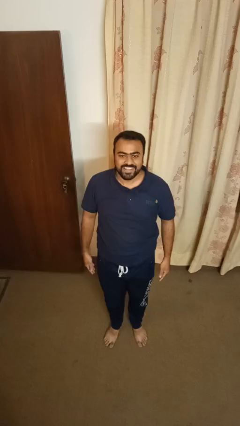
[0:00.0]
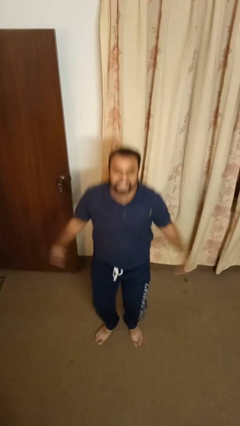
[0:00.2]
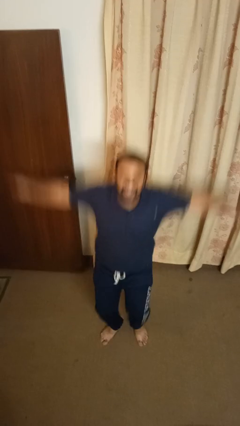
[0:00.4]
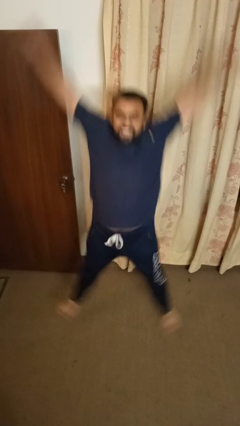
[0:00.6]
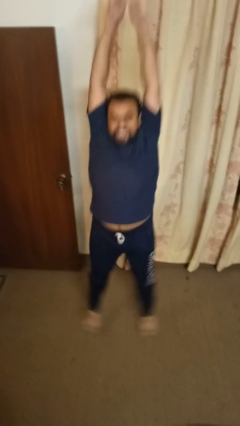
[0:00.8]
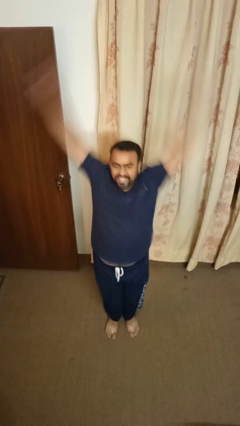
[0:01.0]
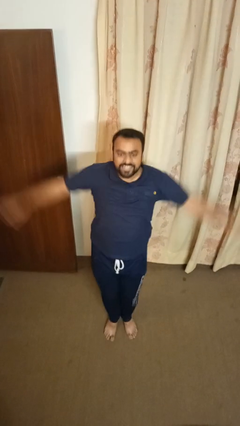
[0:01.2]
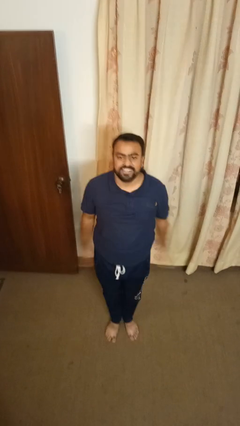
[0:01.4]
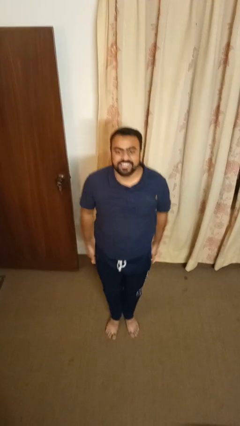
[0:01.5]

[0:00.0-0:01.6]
person exercises with jumping jacks

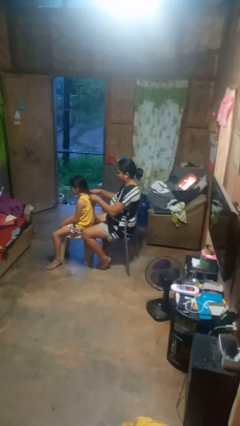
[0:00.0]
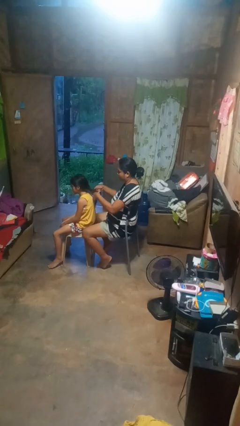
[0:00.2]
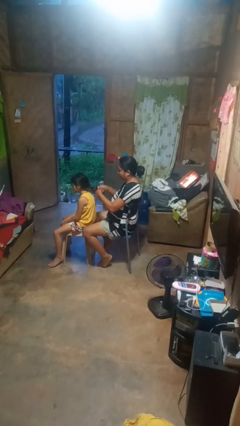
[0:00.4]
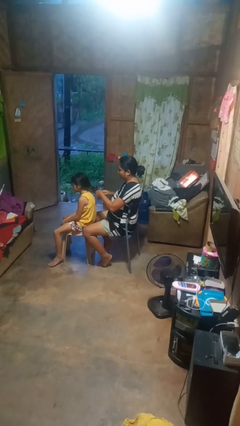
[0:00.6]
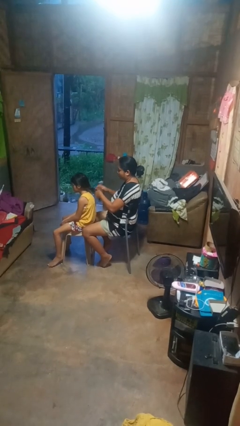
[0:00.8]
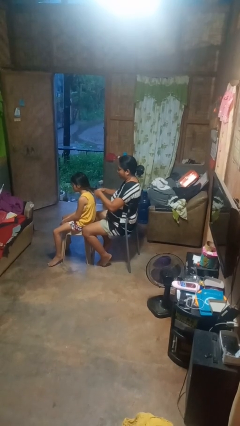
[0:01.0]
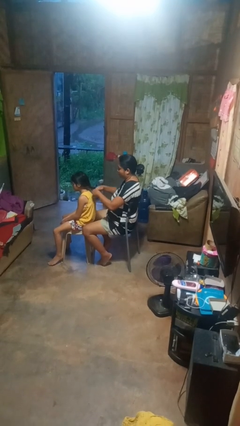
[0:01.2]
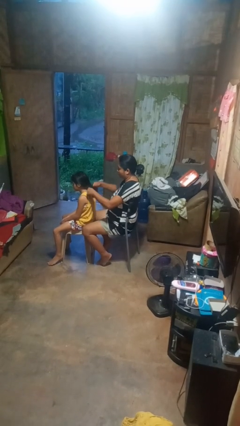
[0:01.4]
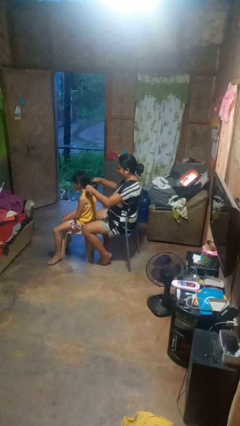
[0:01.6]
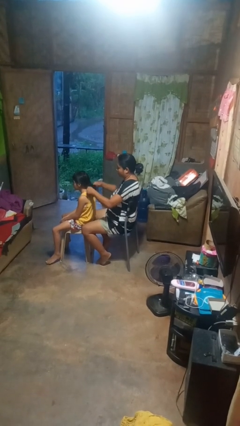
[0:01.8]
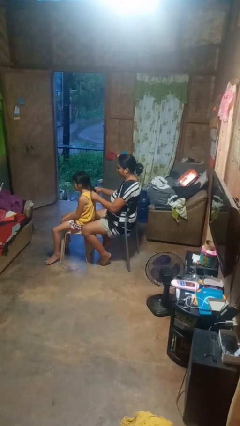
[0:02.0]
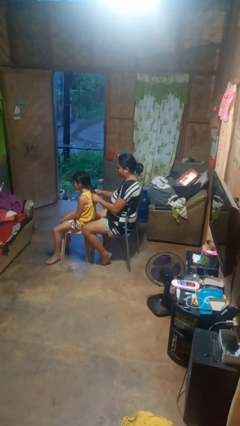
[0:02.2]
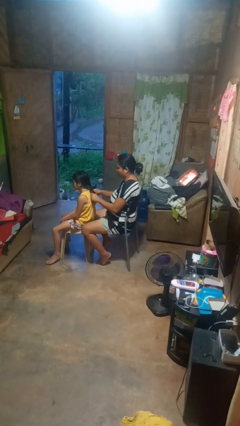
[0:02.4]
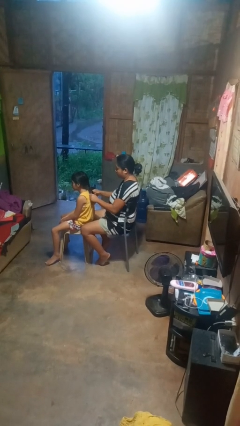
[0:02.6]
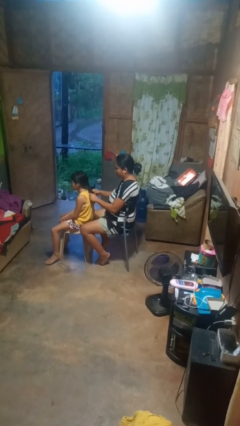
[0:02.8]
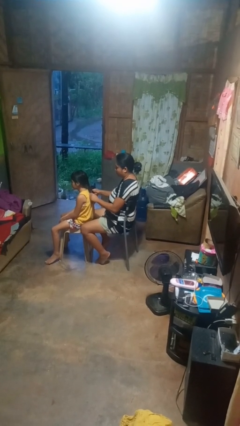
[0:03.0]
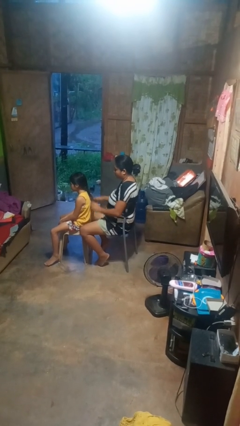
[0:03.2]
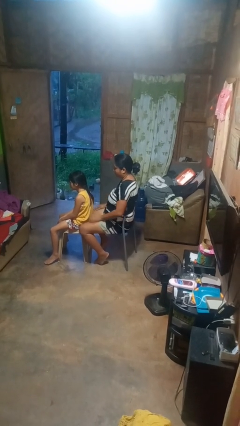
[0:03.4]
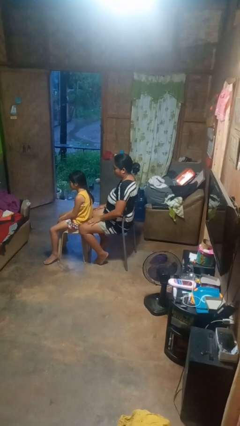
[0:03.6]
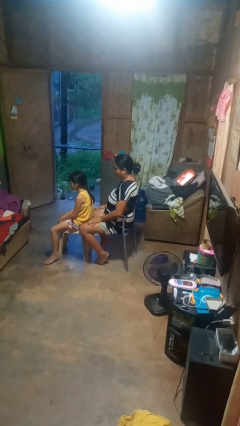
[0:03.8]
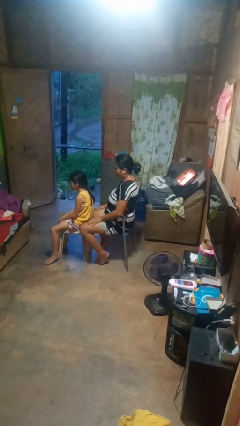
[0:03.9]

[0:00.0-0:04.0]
person braids hair of person

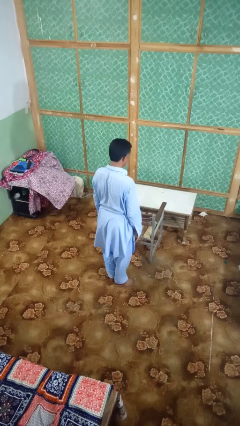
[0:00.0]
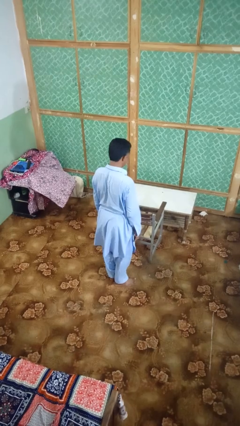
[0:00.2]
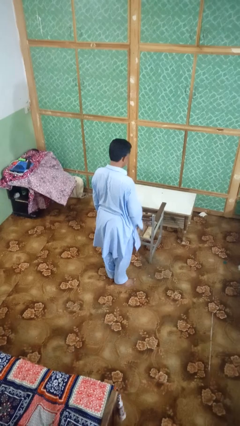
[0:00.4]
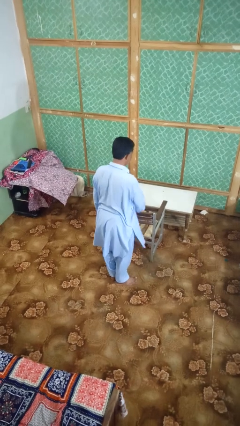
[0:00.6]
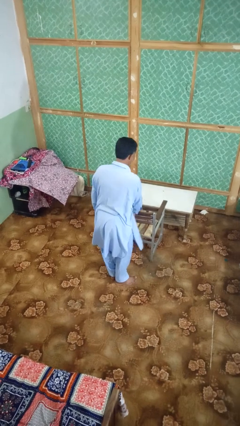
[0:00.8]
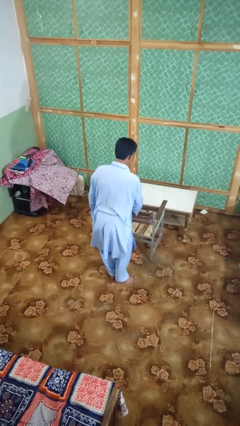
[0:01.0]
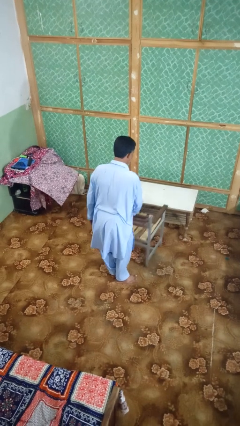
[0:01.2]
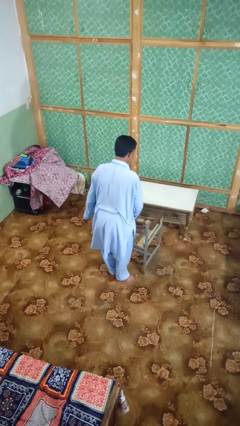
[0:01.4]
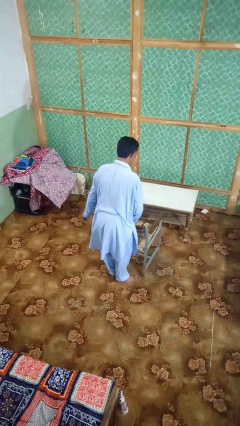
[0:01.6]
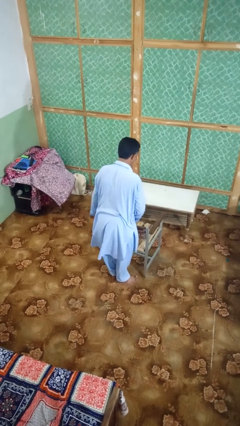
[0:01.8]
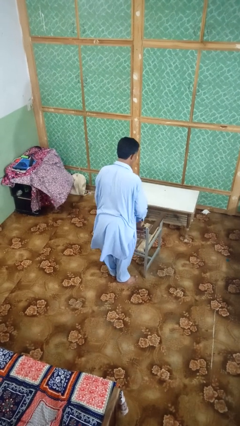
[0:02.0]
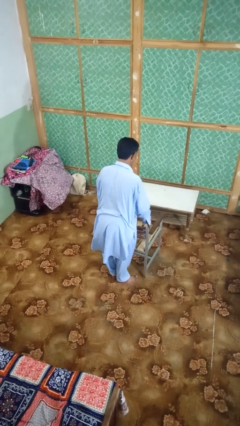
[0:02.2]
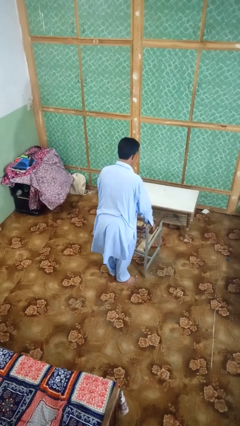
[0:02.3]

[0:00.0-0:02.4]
person pulls out chair

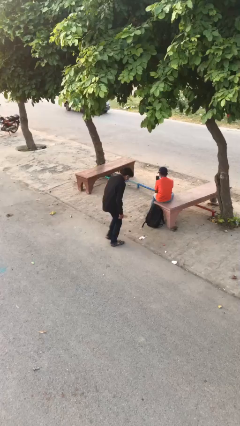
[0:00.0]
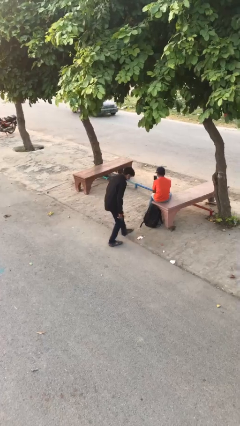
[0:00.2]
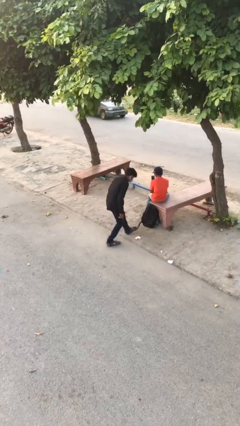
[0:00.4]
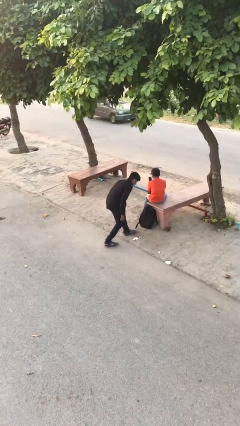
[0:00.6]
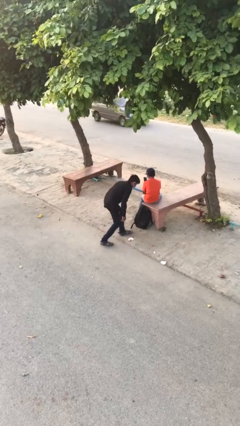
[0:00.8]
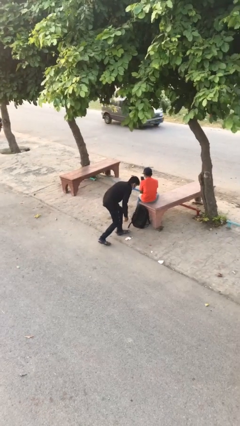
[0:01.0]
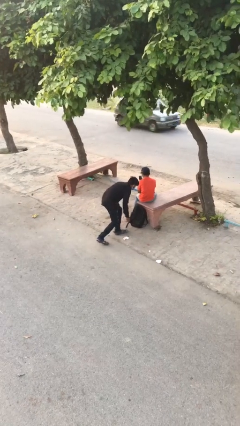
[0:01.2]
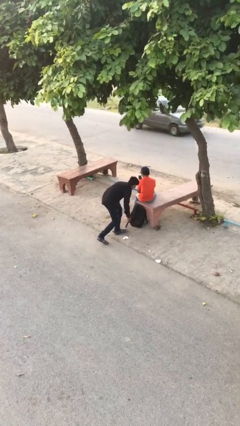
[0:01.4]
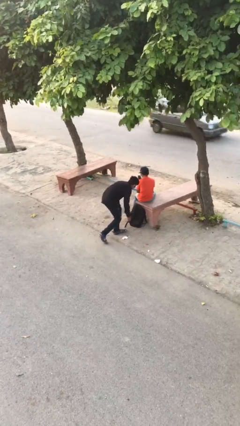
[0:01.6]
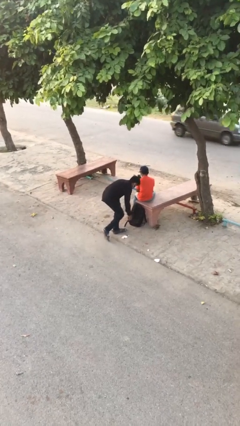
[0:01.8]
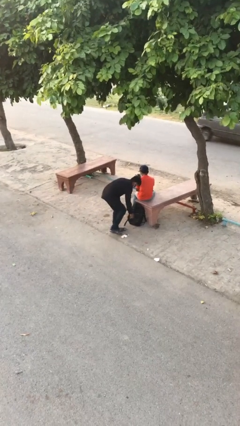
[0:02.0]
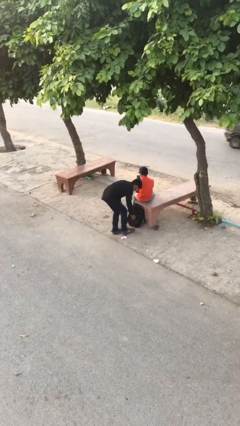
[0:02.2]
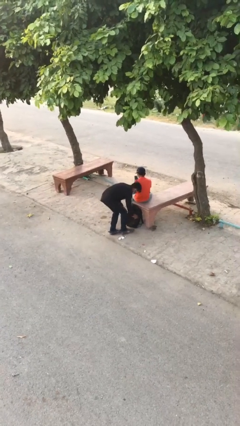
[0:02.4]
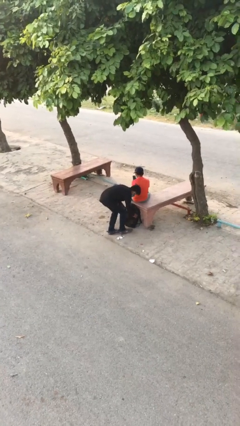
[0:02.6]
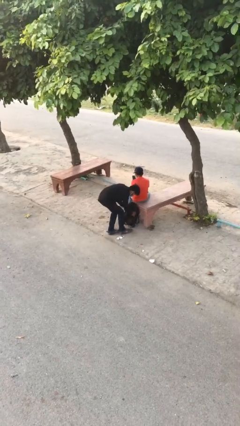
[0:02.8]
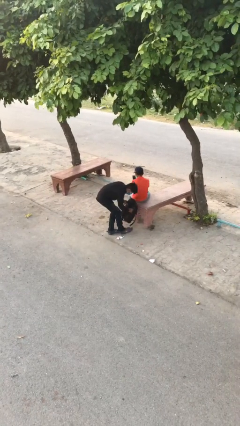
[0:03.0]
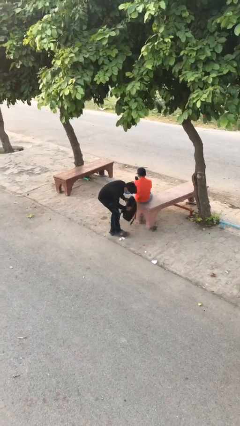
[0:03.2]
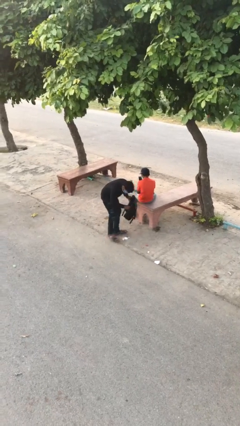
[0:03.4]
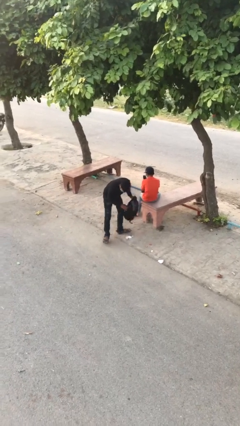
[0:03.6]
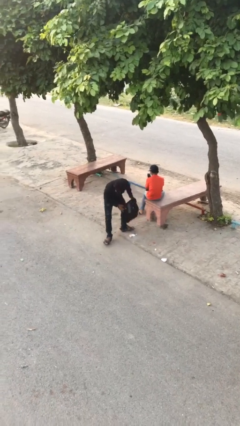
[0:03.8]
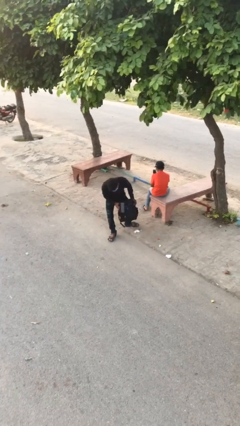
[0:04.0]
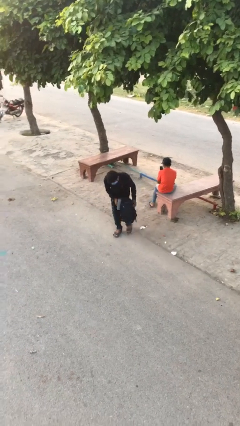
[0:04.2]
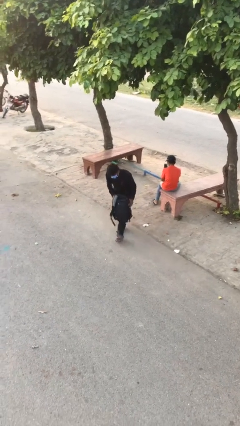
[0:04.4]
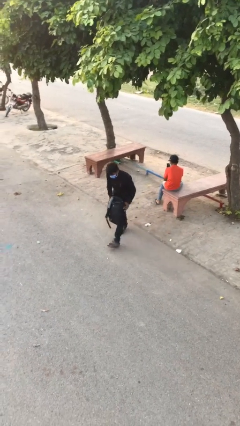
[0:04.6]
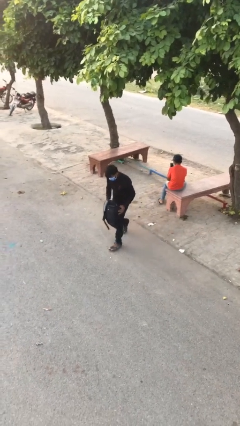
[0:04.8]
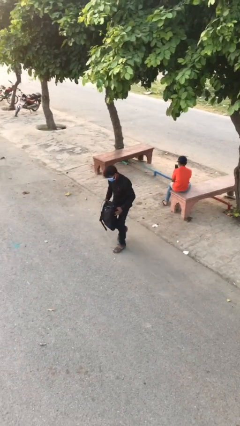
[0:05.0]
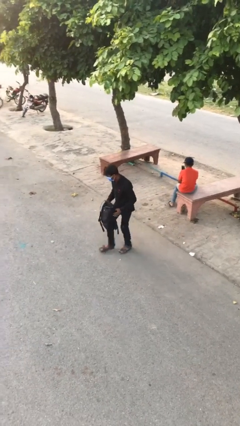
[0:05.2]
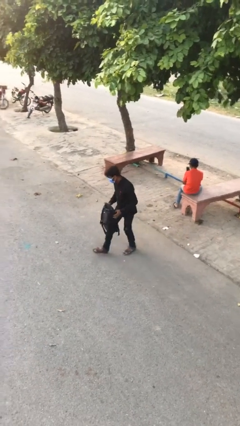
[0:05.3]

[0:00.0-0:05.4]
person steals object from person

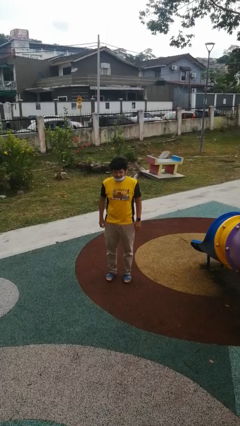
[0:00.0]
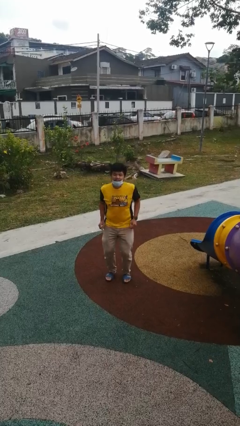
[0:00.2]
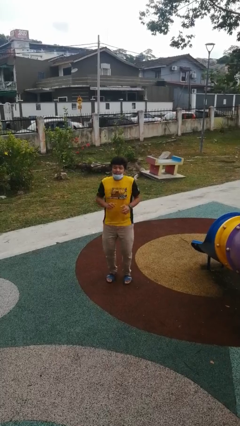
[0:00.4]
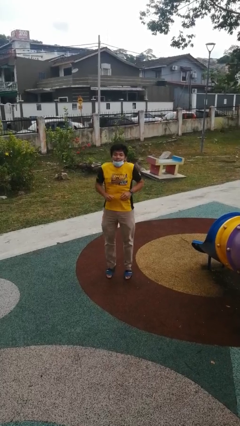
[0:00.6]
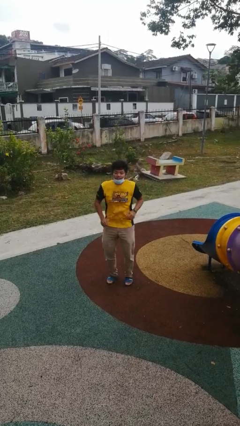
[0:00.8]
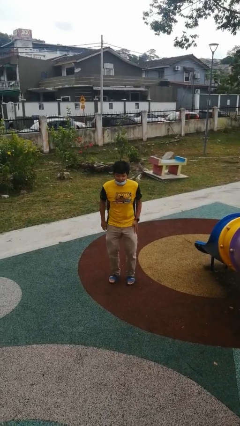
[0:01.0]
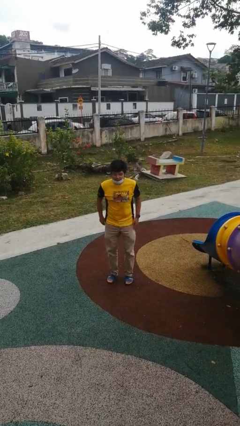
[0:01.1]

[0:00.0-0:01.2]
person jumps

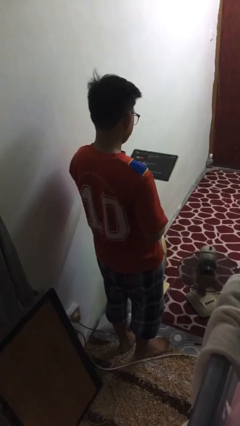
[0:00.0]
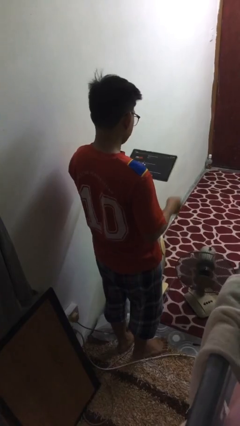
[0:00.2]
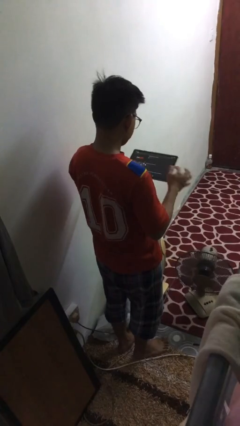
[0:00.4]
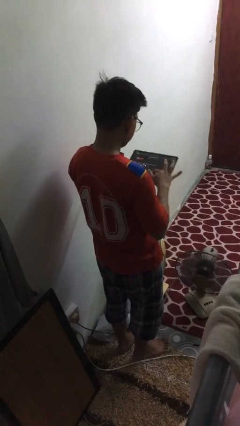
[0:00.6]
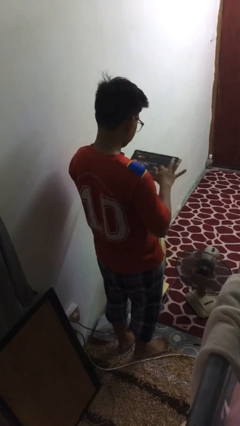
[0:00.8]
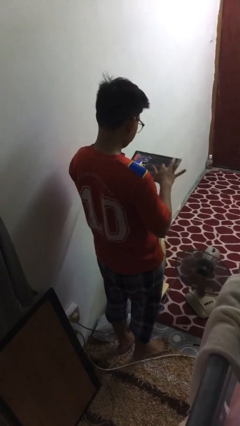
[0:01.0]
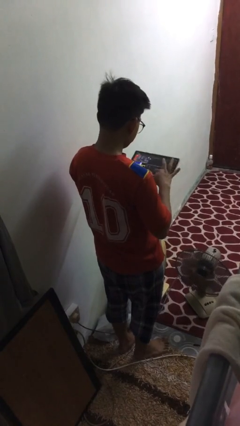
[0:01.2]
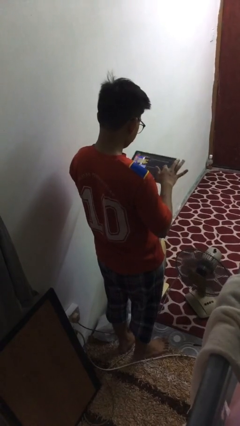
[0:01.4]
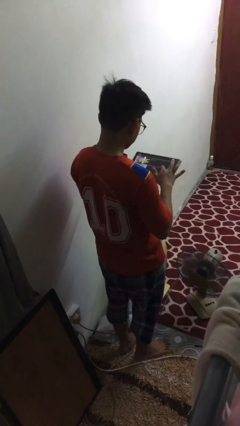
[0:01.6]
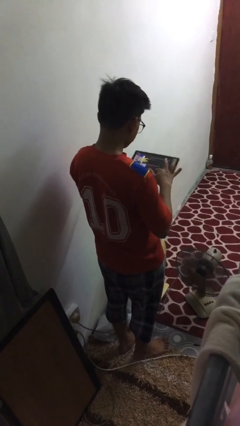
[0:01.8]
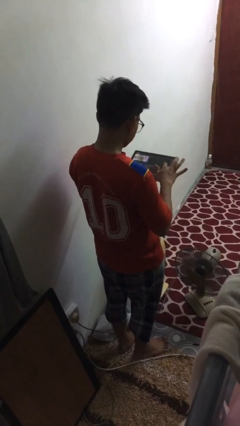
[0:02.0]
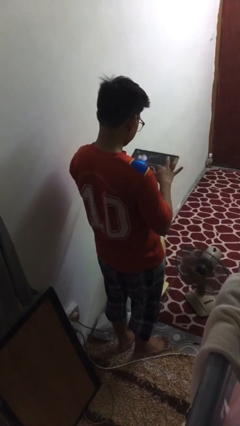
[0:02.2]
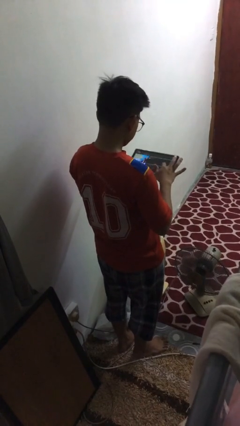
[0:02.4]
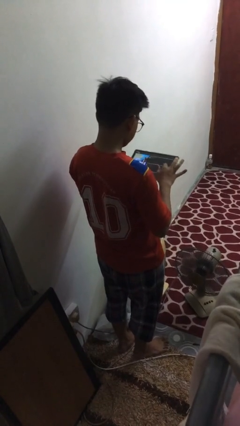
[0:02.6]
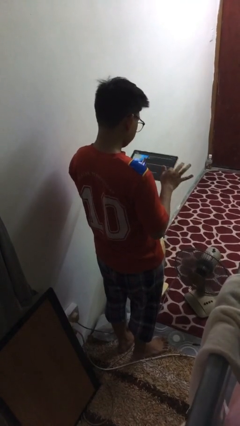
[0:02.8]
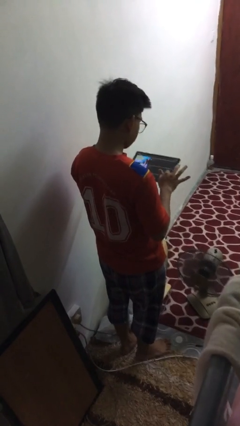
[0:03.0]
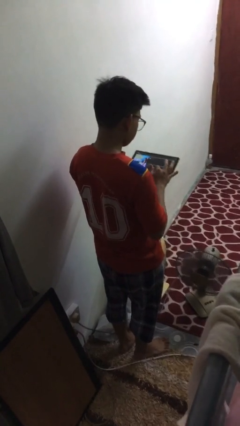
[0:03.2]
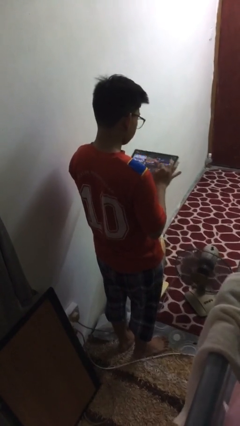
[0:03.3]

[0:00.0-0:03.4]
person interacts with tablet
